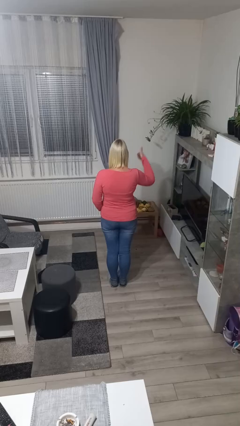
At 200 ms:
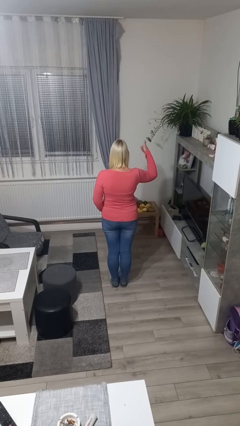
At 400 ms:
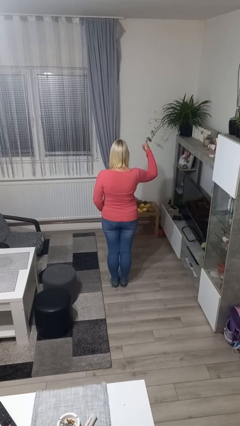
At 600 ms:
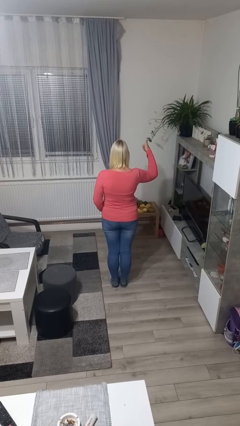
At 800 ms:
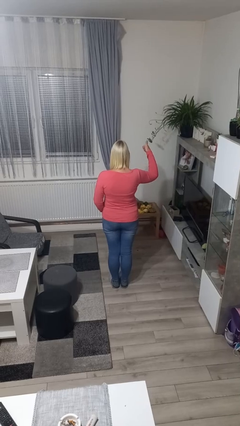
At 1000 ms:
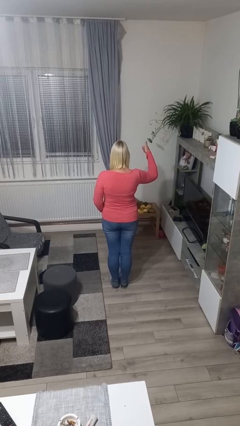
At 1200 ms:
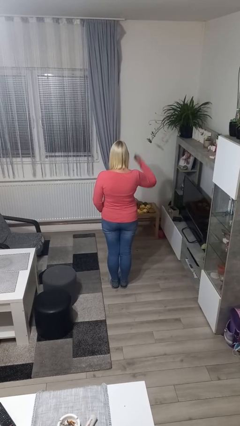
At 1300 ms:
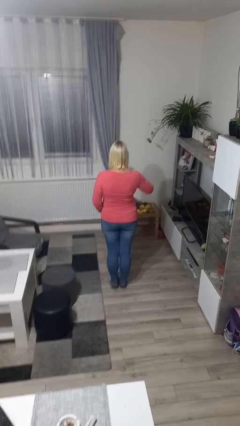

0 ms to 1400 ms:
person gestures number one

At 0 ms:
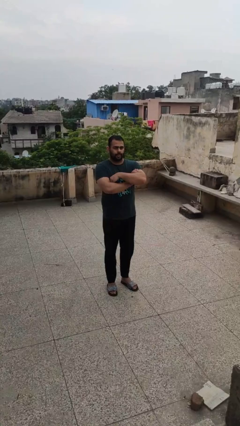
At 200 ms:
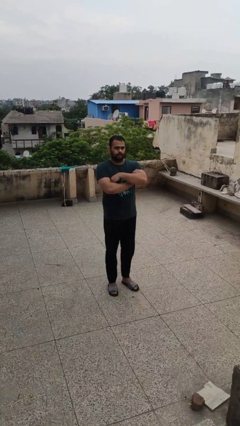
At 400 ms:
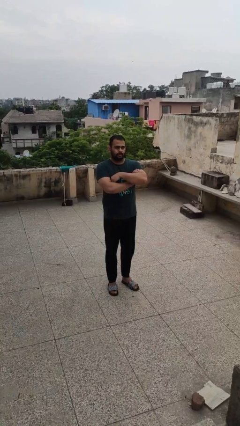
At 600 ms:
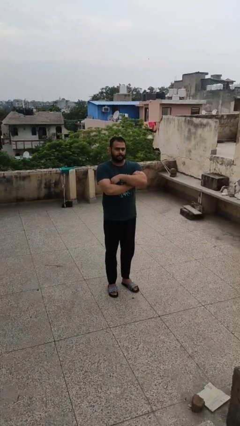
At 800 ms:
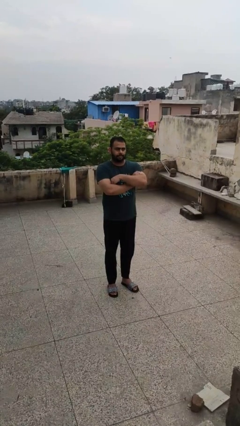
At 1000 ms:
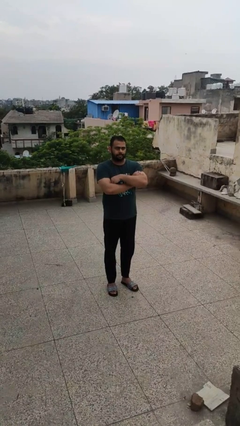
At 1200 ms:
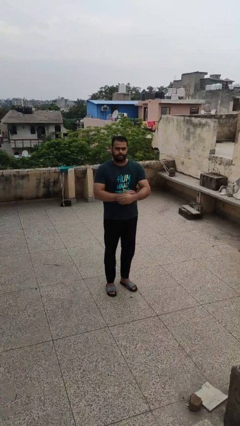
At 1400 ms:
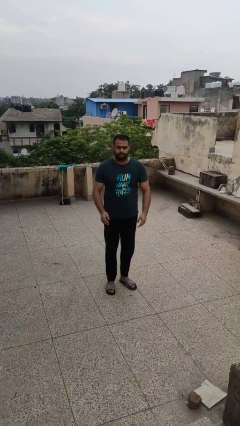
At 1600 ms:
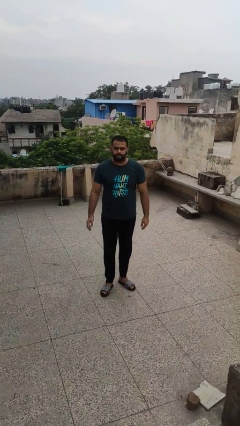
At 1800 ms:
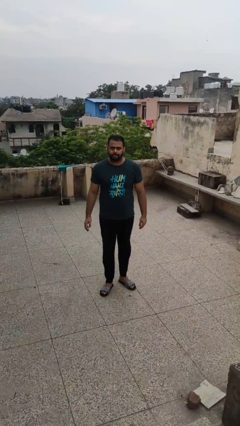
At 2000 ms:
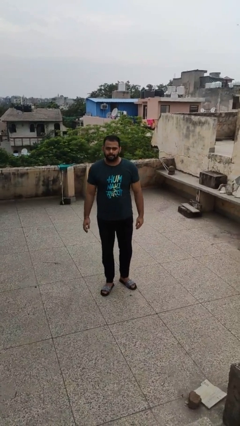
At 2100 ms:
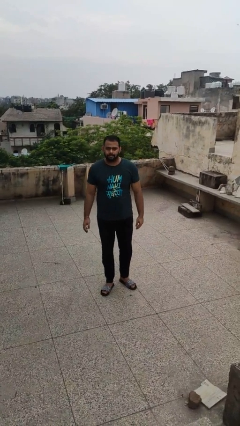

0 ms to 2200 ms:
person crosses arms

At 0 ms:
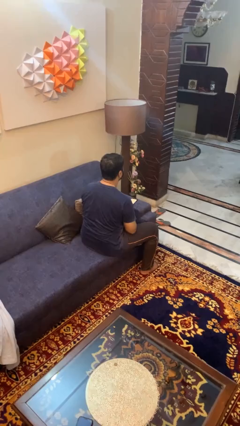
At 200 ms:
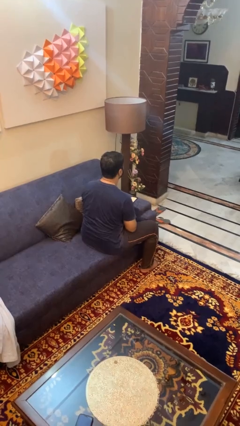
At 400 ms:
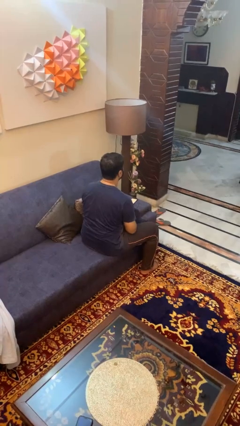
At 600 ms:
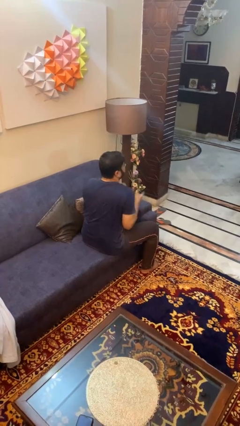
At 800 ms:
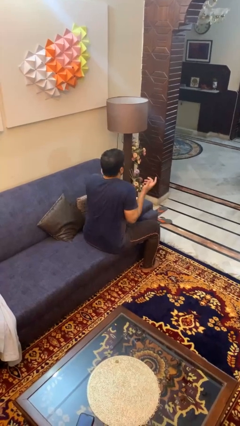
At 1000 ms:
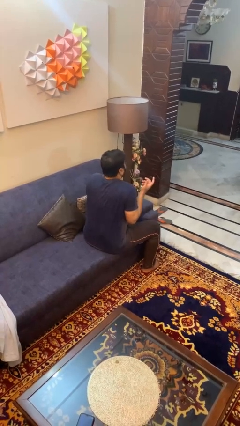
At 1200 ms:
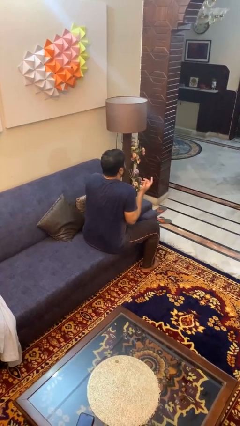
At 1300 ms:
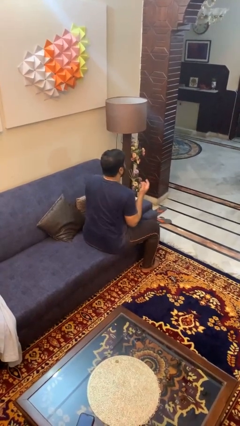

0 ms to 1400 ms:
person shrugs

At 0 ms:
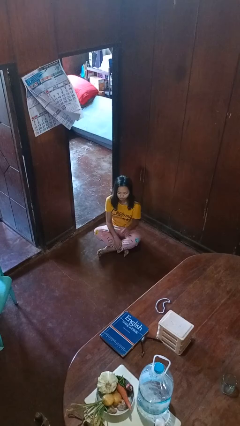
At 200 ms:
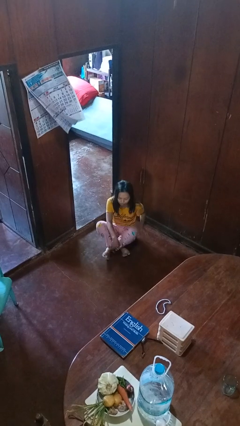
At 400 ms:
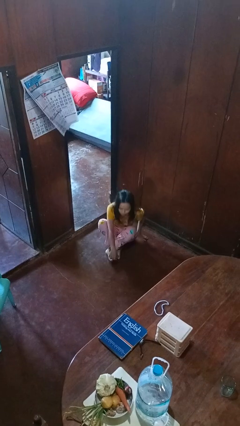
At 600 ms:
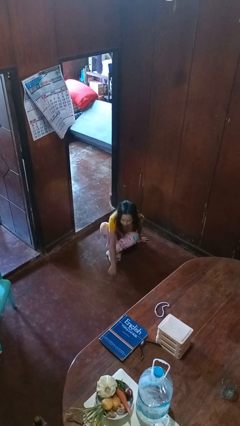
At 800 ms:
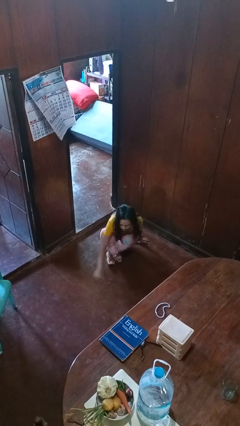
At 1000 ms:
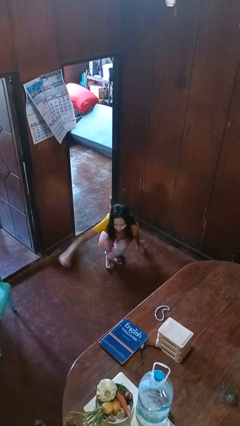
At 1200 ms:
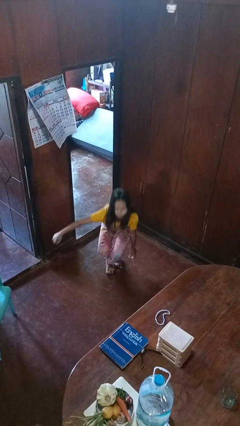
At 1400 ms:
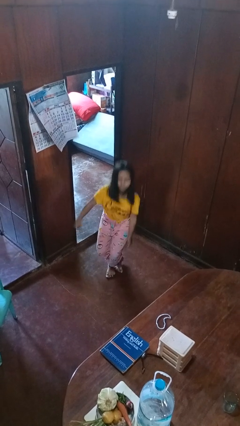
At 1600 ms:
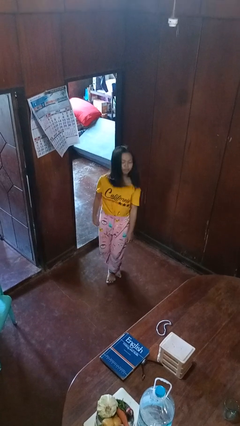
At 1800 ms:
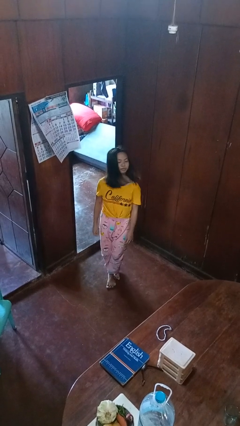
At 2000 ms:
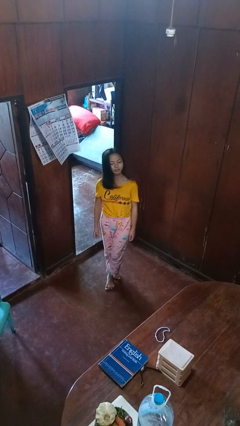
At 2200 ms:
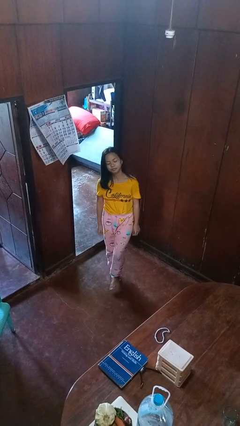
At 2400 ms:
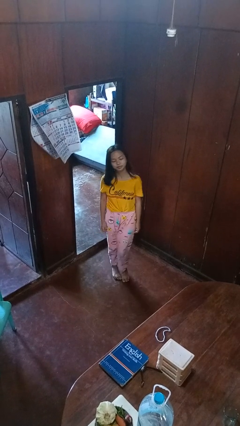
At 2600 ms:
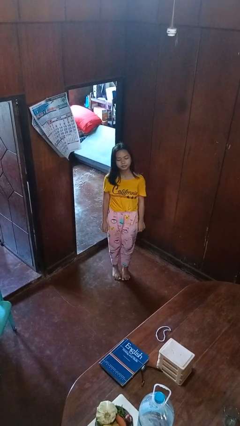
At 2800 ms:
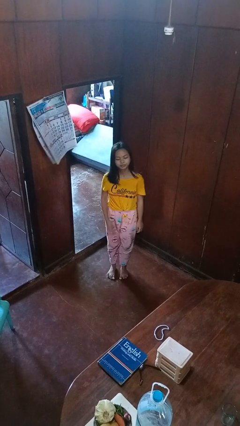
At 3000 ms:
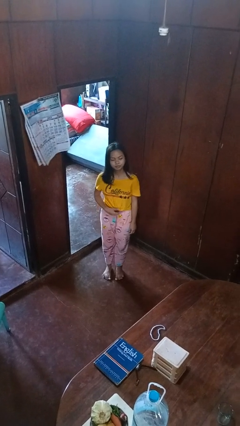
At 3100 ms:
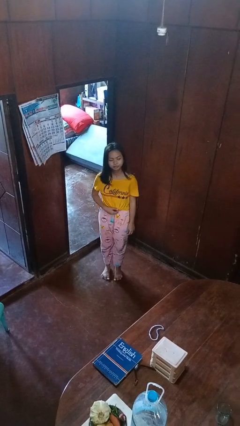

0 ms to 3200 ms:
person stands up from floor

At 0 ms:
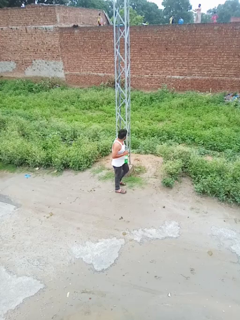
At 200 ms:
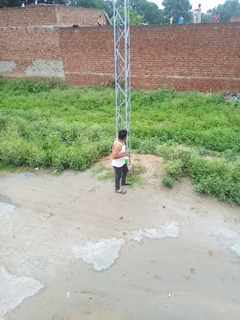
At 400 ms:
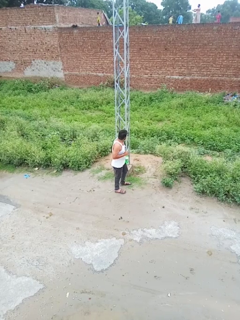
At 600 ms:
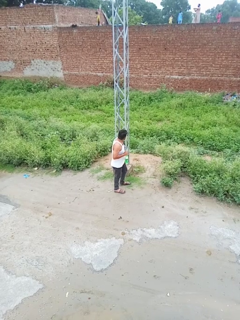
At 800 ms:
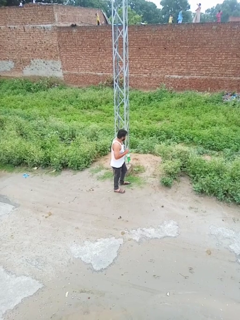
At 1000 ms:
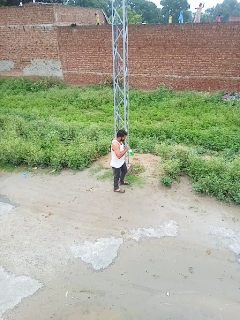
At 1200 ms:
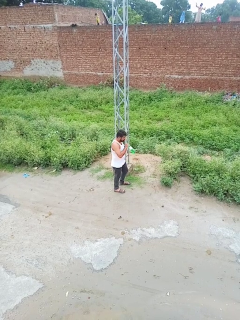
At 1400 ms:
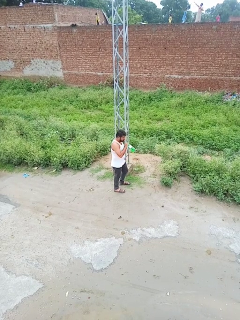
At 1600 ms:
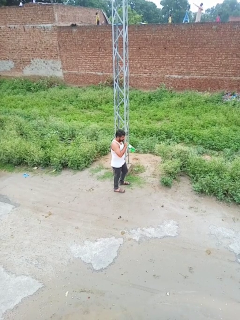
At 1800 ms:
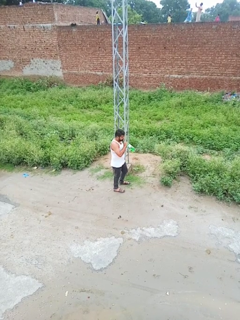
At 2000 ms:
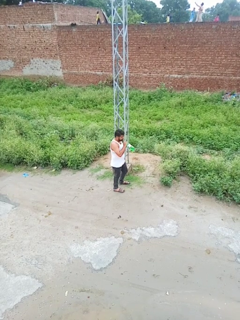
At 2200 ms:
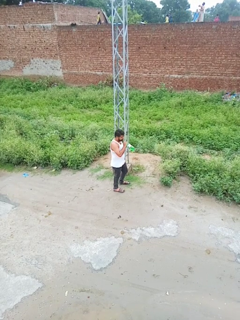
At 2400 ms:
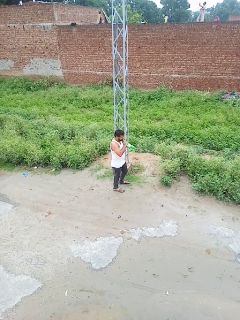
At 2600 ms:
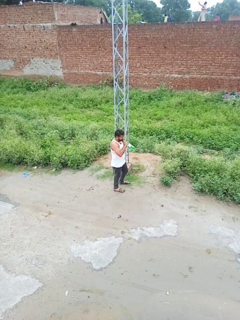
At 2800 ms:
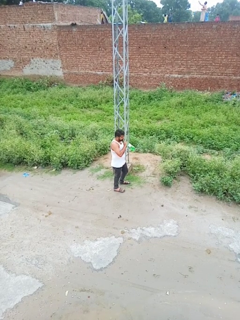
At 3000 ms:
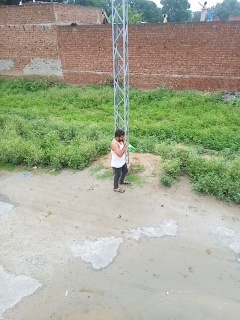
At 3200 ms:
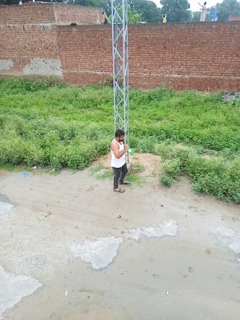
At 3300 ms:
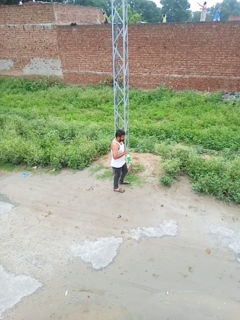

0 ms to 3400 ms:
person drinks from straw

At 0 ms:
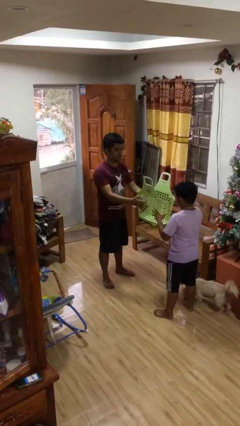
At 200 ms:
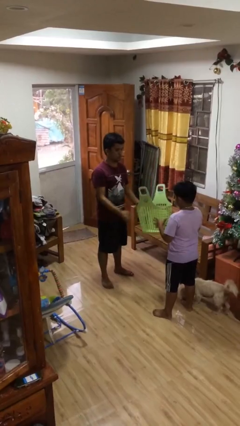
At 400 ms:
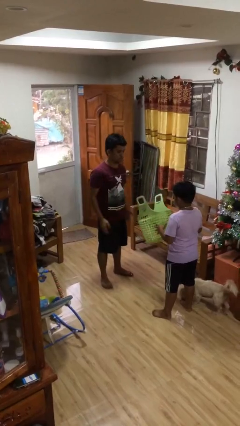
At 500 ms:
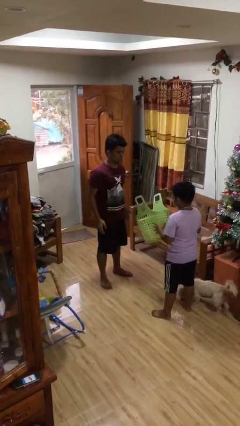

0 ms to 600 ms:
person transfers object to person

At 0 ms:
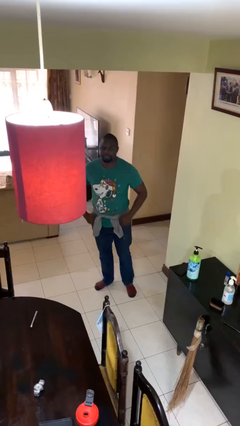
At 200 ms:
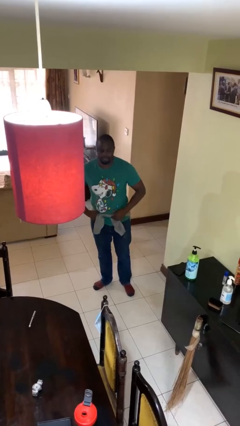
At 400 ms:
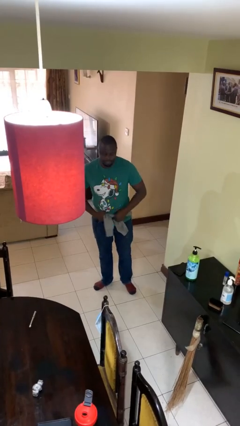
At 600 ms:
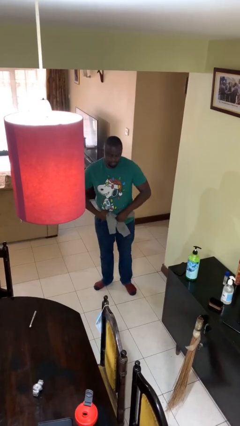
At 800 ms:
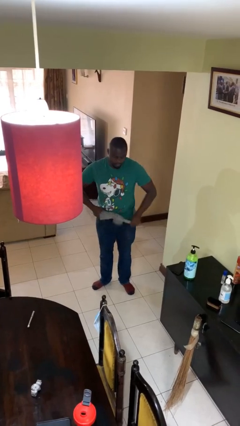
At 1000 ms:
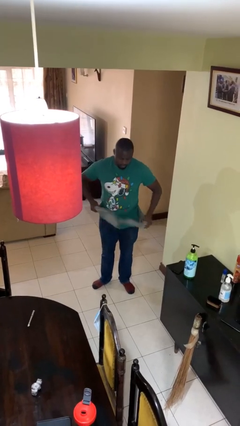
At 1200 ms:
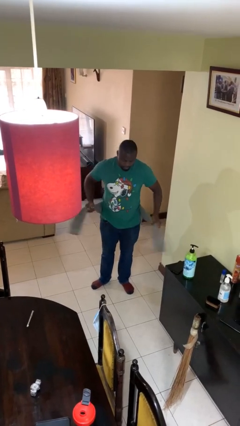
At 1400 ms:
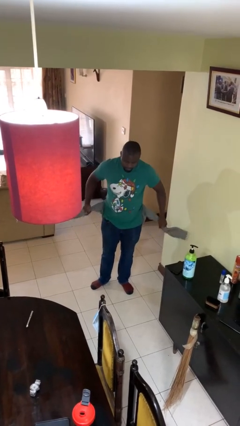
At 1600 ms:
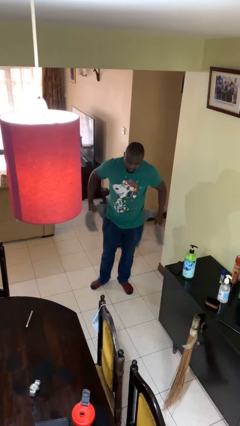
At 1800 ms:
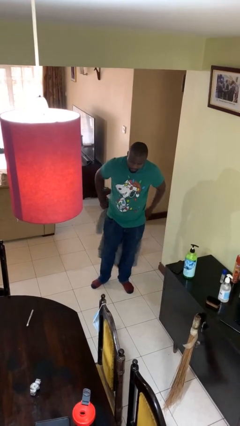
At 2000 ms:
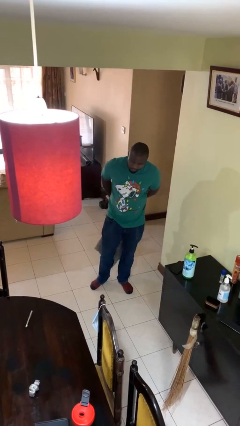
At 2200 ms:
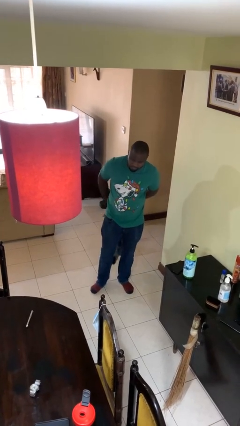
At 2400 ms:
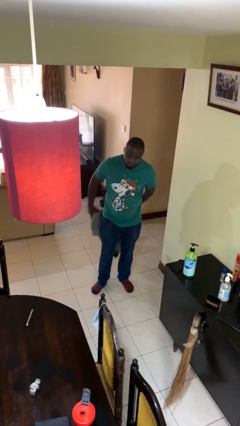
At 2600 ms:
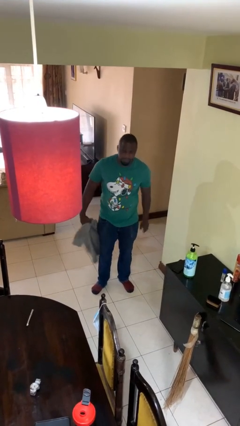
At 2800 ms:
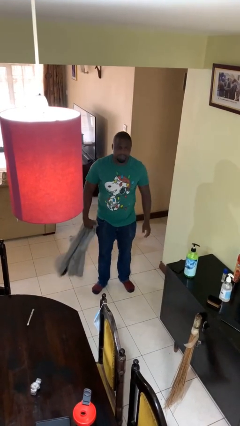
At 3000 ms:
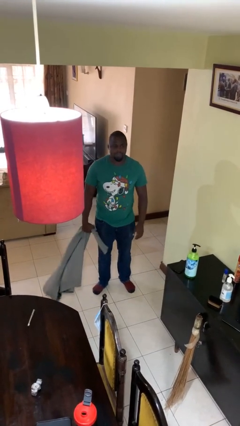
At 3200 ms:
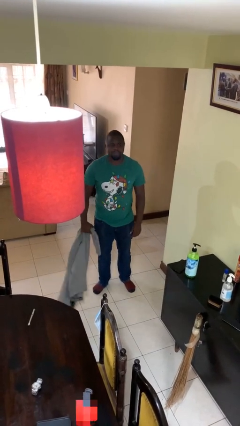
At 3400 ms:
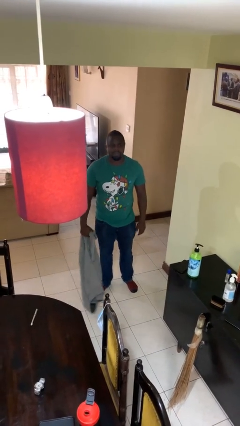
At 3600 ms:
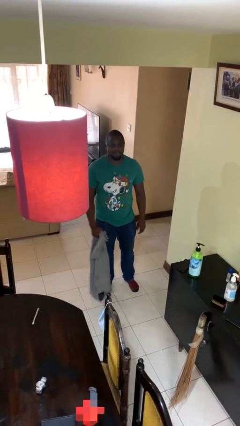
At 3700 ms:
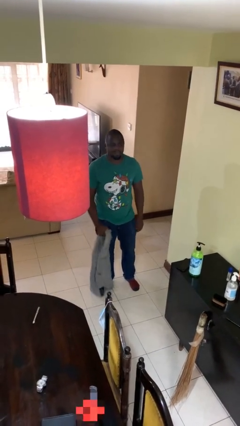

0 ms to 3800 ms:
person unties jacket around waist

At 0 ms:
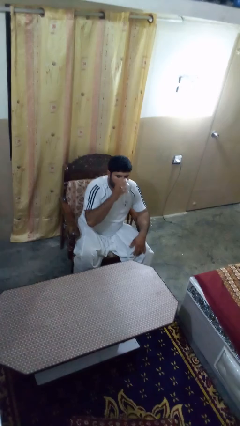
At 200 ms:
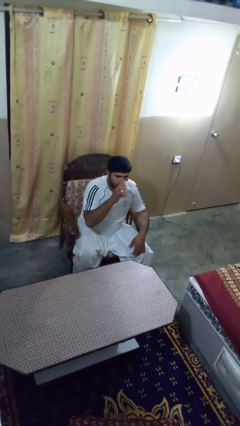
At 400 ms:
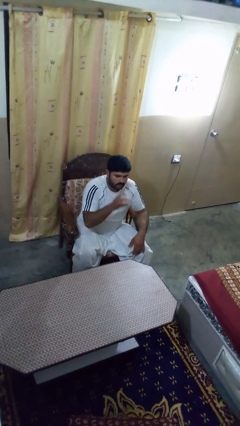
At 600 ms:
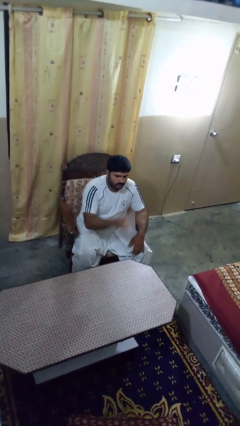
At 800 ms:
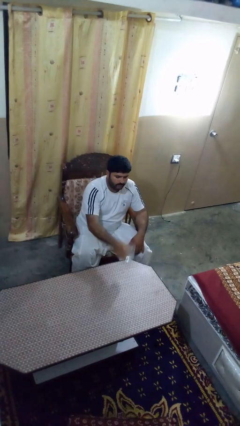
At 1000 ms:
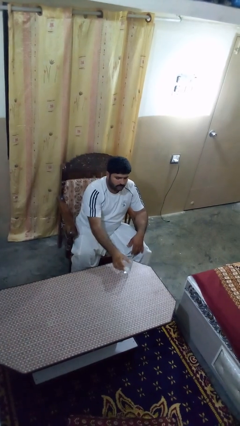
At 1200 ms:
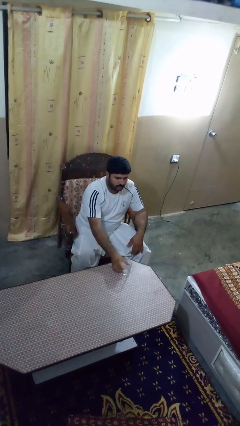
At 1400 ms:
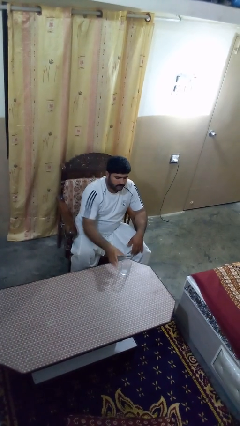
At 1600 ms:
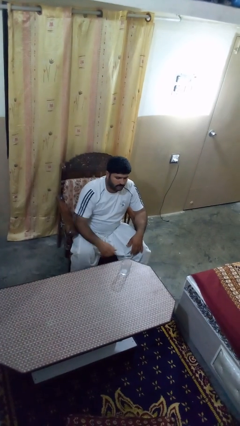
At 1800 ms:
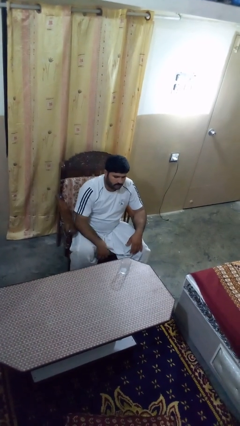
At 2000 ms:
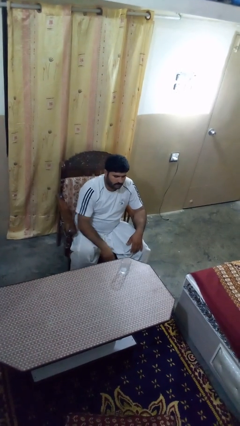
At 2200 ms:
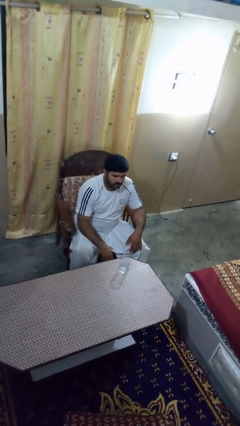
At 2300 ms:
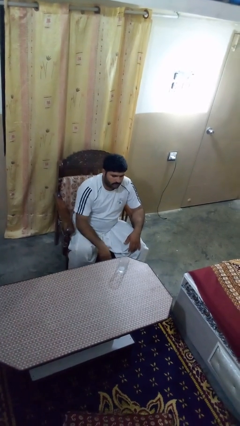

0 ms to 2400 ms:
person puts down object on table
